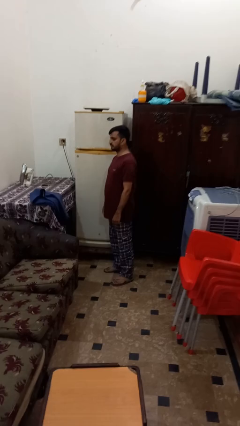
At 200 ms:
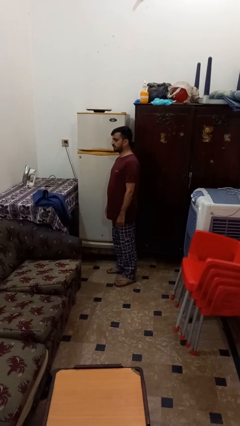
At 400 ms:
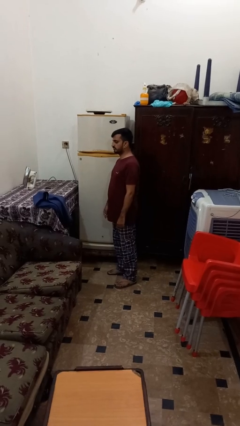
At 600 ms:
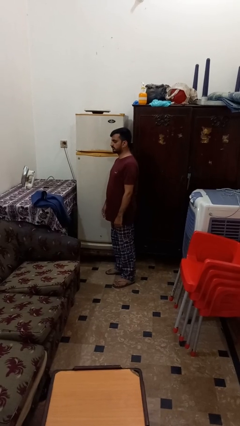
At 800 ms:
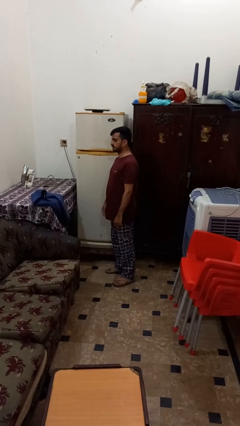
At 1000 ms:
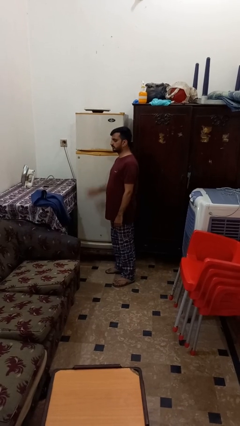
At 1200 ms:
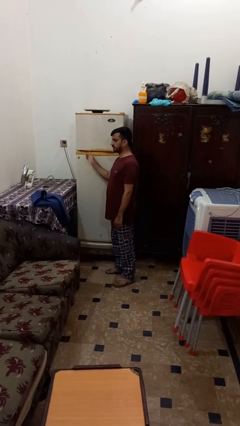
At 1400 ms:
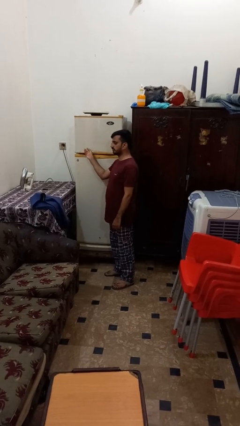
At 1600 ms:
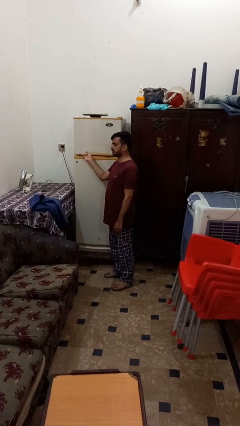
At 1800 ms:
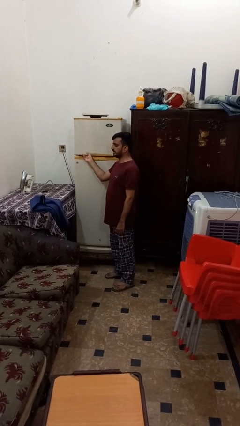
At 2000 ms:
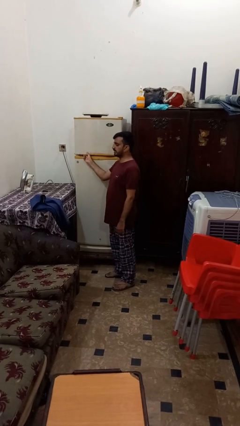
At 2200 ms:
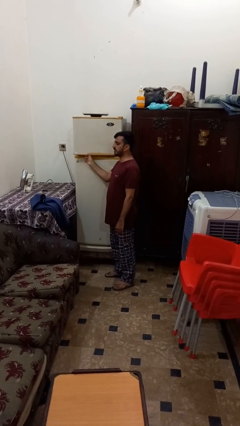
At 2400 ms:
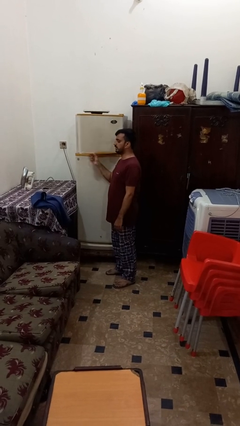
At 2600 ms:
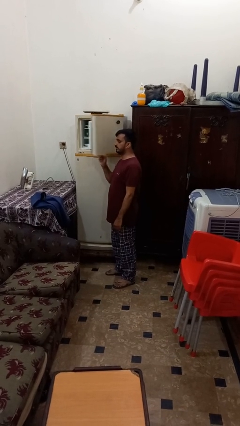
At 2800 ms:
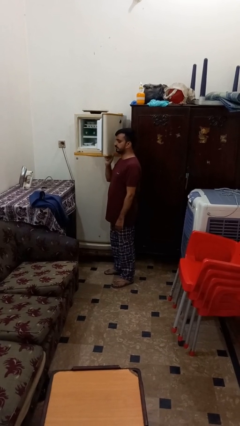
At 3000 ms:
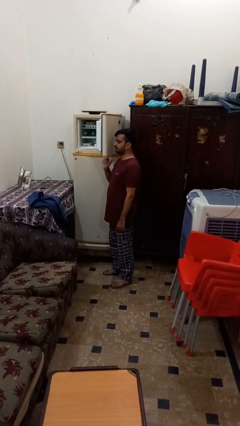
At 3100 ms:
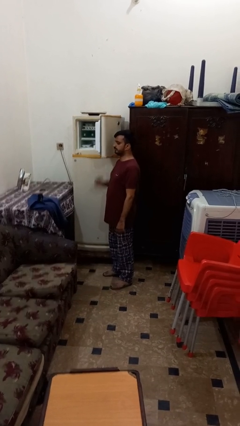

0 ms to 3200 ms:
person opens refrigerator

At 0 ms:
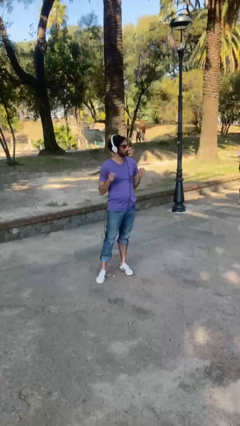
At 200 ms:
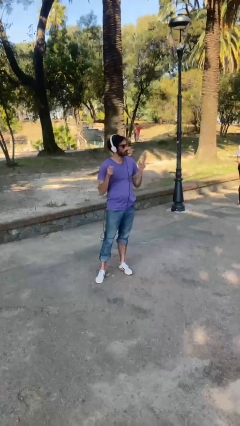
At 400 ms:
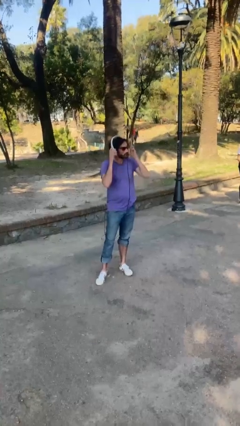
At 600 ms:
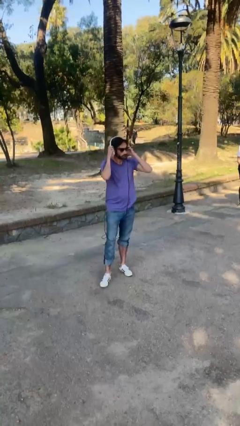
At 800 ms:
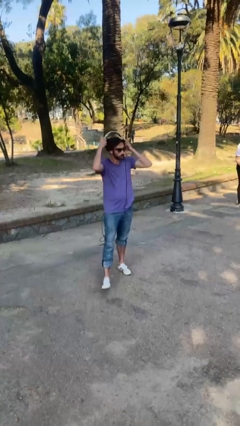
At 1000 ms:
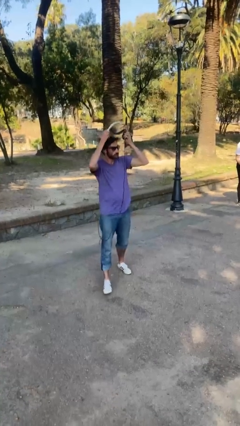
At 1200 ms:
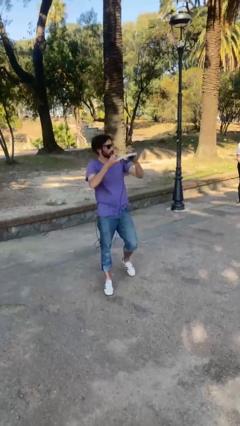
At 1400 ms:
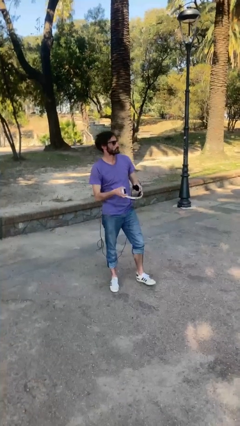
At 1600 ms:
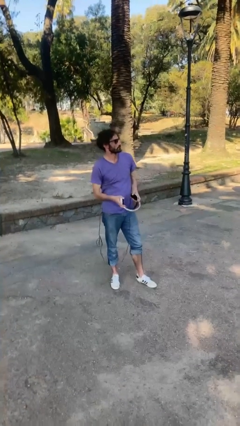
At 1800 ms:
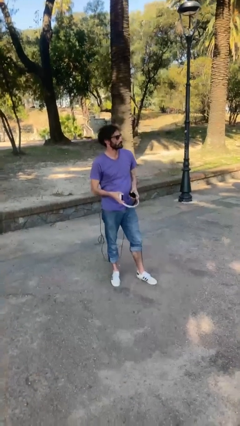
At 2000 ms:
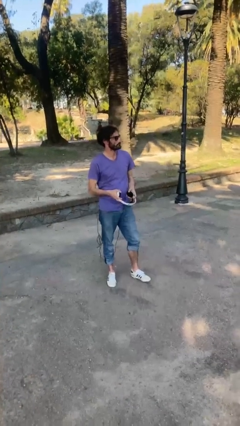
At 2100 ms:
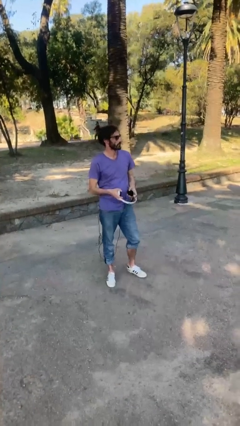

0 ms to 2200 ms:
person takes off headphones

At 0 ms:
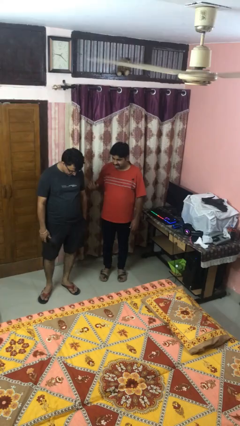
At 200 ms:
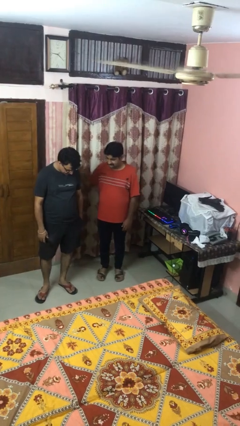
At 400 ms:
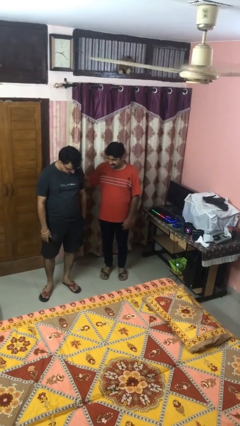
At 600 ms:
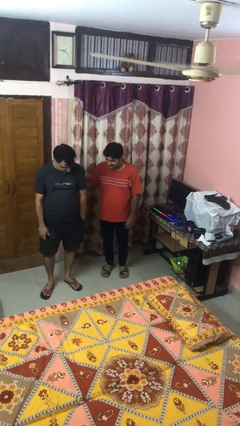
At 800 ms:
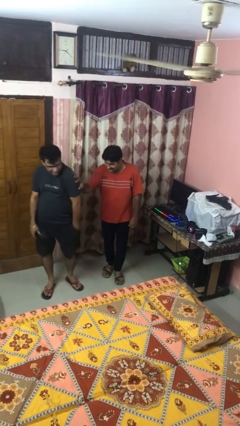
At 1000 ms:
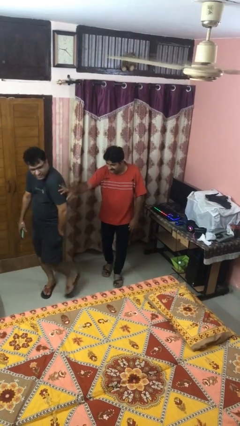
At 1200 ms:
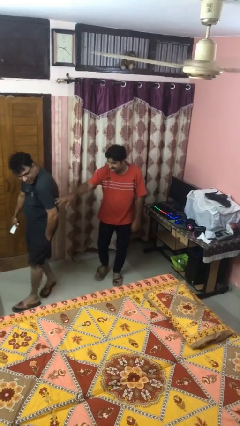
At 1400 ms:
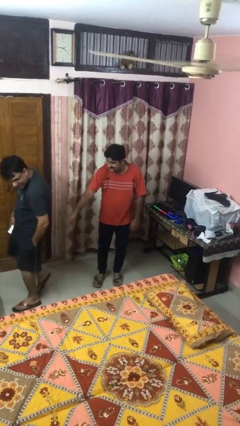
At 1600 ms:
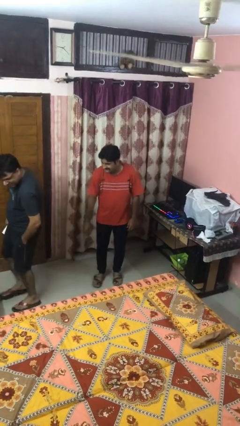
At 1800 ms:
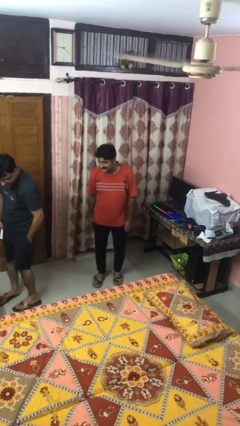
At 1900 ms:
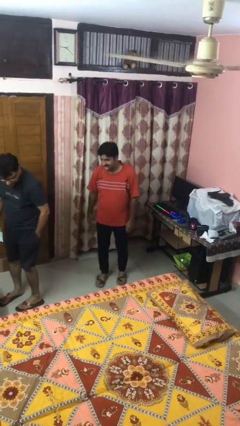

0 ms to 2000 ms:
person shoves person

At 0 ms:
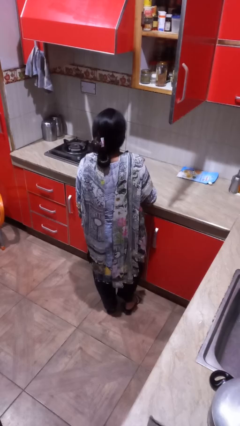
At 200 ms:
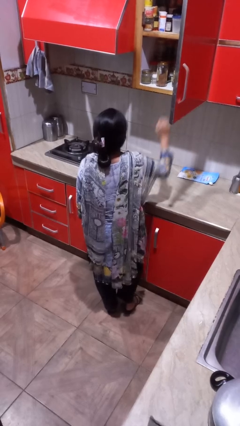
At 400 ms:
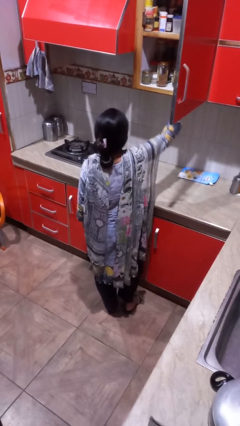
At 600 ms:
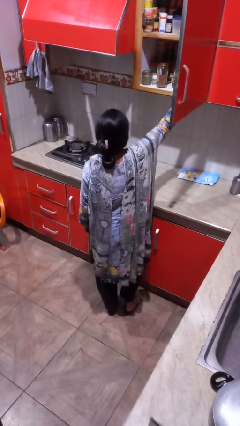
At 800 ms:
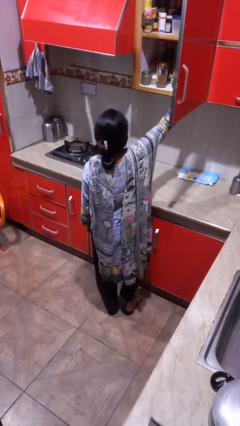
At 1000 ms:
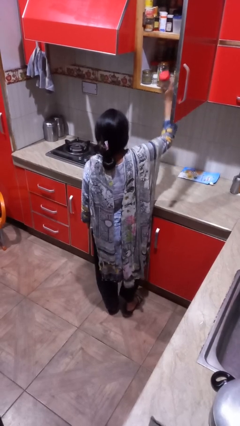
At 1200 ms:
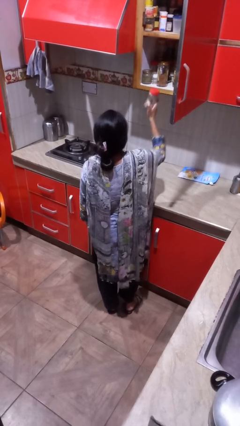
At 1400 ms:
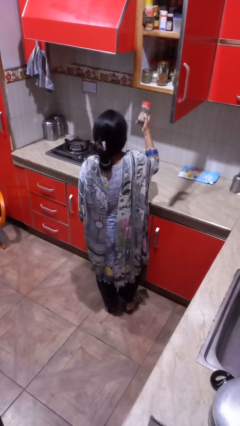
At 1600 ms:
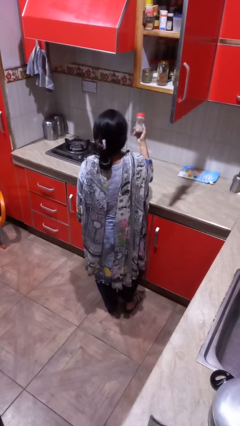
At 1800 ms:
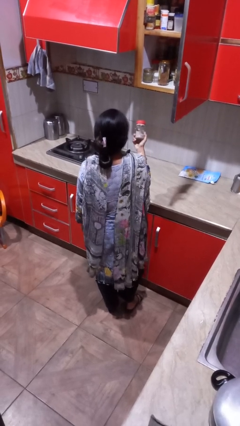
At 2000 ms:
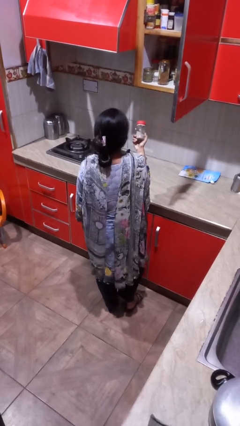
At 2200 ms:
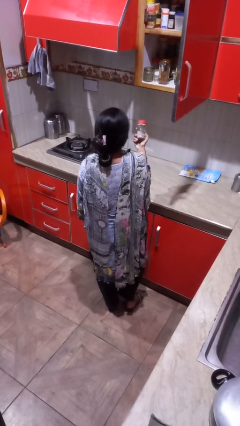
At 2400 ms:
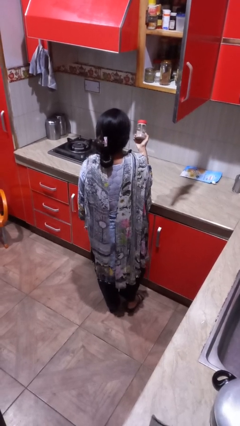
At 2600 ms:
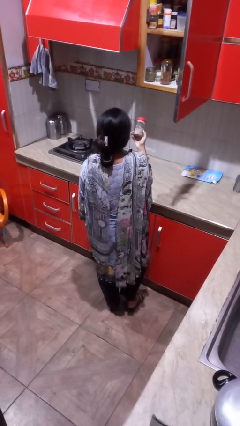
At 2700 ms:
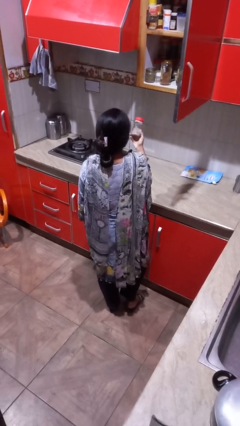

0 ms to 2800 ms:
person takes object from cabinet

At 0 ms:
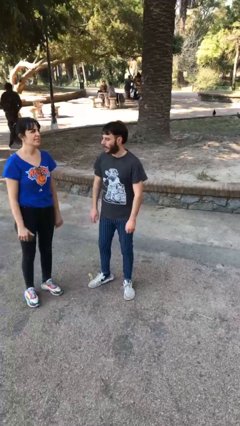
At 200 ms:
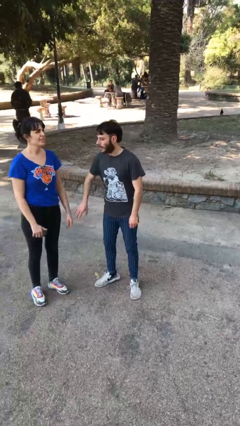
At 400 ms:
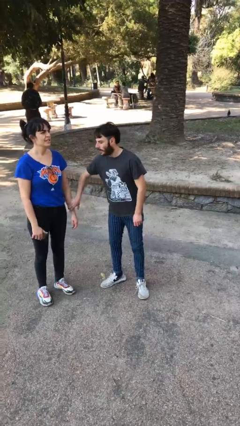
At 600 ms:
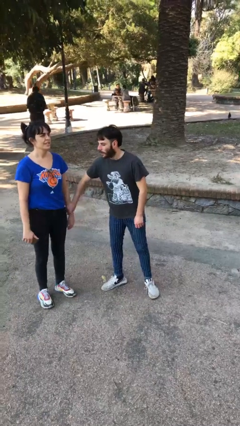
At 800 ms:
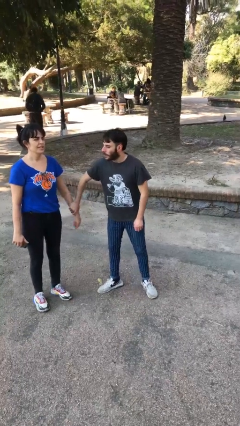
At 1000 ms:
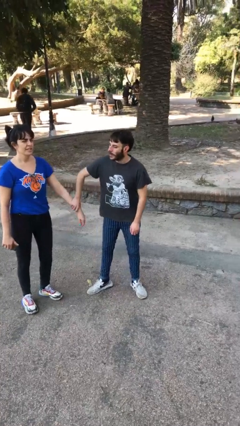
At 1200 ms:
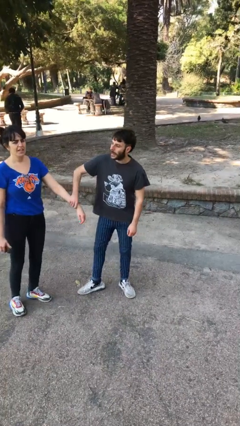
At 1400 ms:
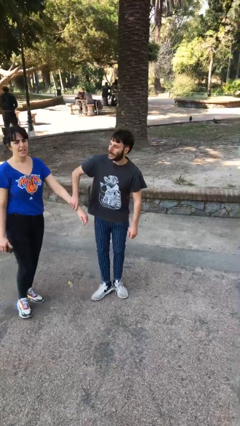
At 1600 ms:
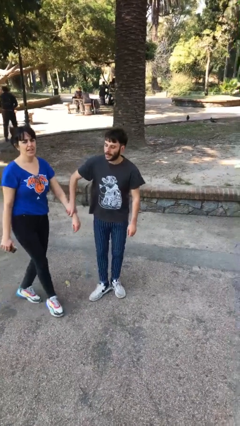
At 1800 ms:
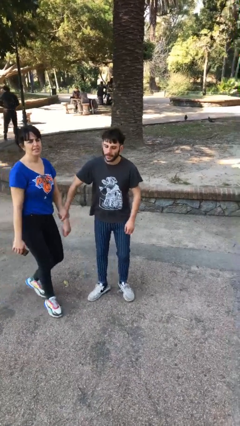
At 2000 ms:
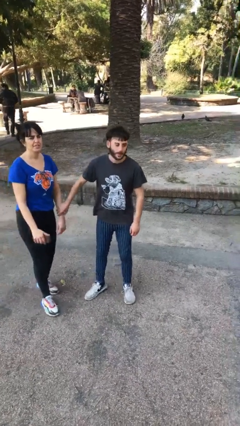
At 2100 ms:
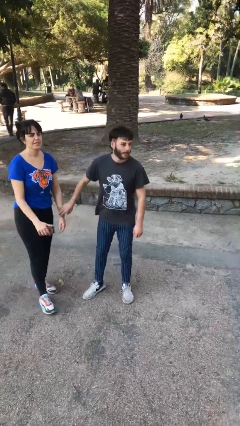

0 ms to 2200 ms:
person grabs person by forearm

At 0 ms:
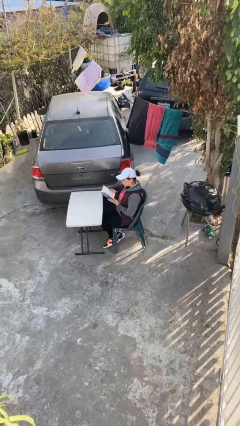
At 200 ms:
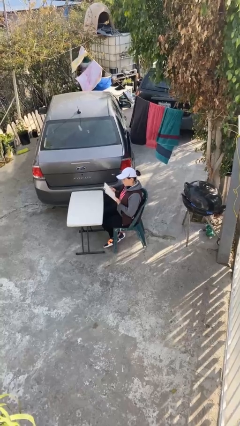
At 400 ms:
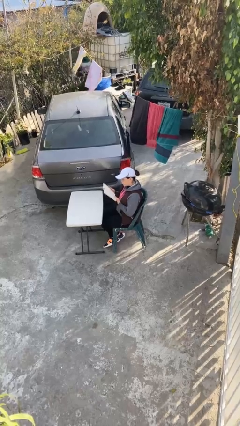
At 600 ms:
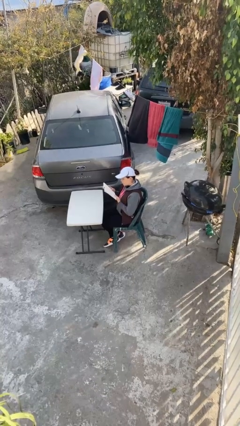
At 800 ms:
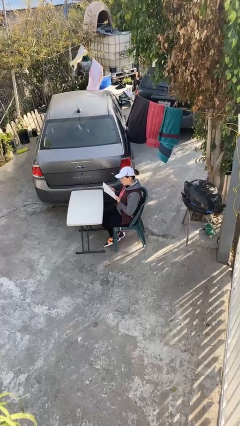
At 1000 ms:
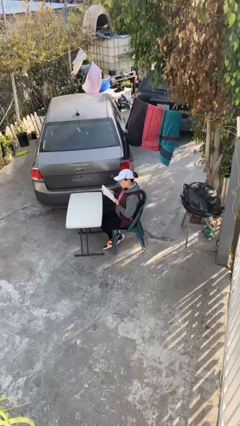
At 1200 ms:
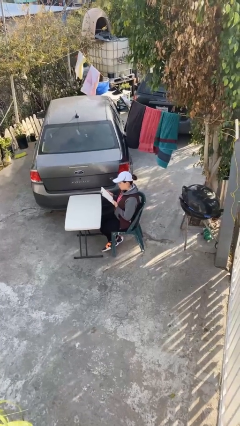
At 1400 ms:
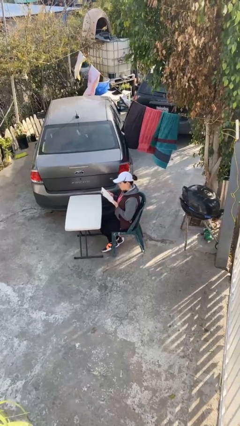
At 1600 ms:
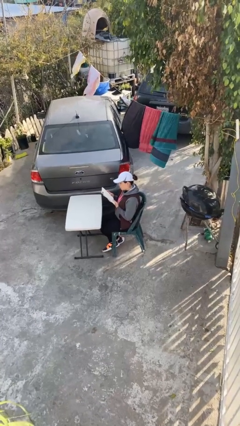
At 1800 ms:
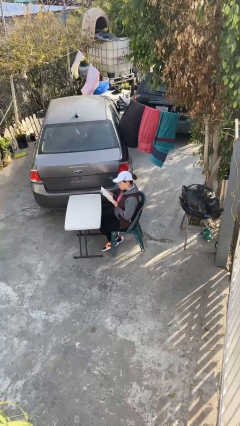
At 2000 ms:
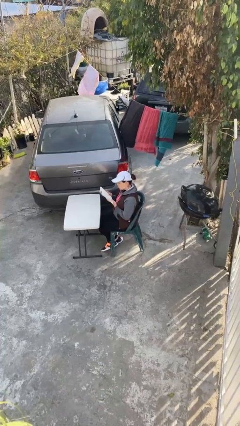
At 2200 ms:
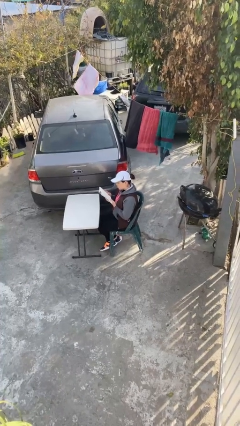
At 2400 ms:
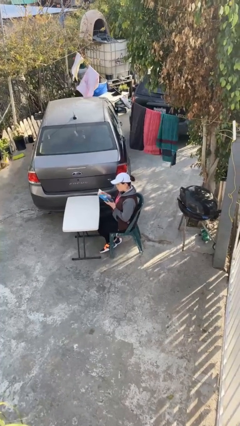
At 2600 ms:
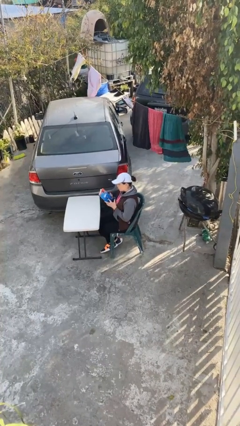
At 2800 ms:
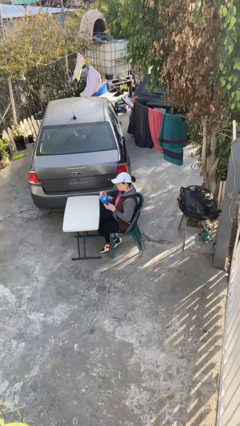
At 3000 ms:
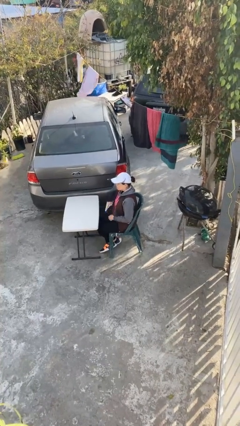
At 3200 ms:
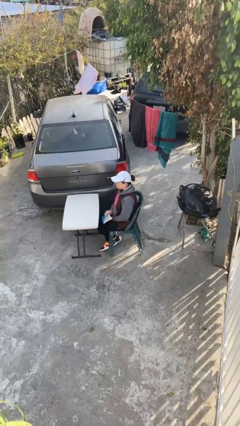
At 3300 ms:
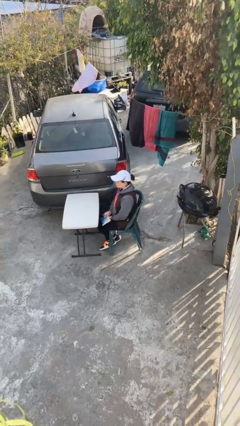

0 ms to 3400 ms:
person reads document

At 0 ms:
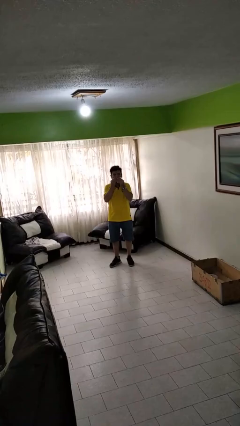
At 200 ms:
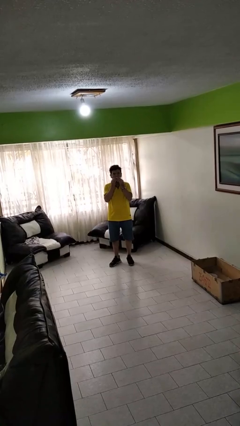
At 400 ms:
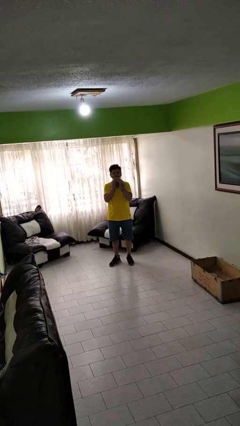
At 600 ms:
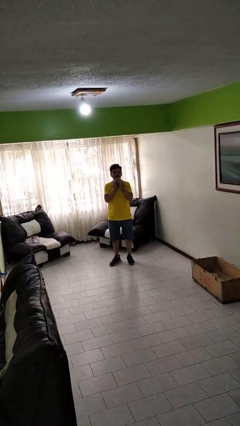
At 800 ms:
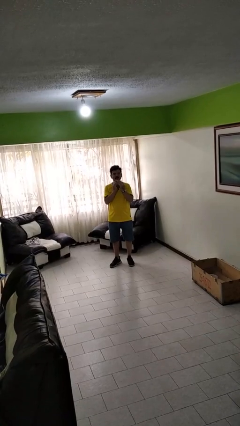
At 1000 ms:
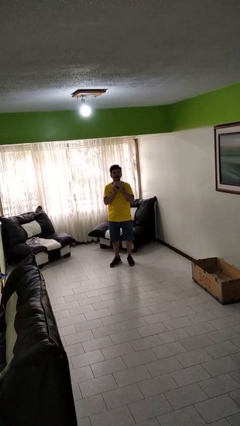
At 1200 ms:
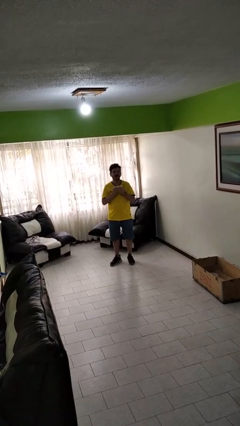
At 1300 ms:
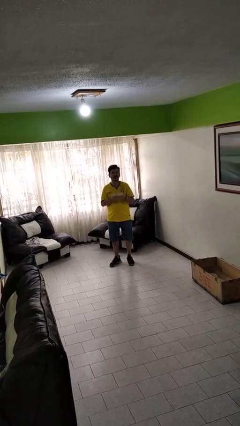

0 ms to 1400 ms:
person wipes mouth with napkin
